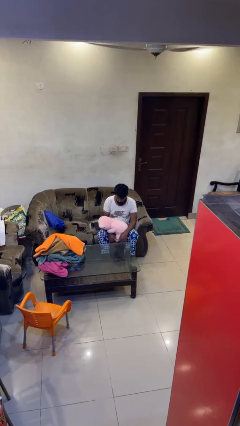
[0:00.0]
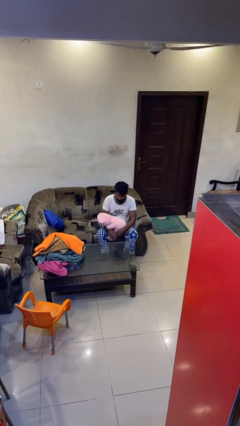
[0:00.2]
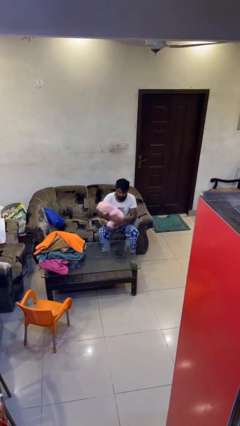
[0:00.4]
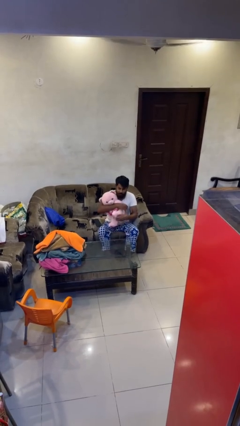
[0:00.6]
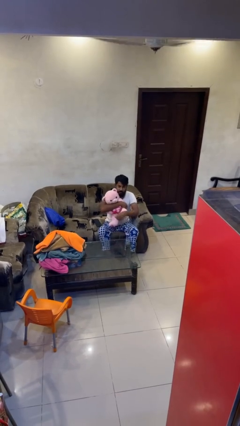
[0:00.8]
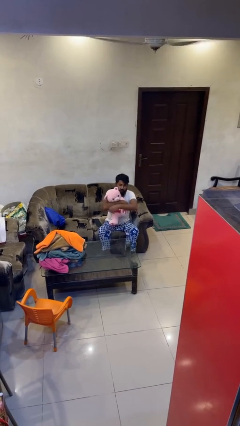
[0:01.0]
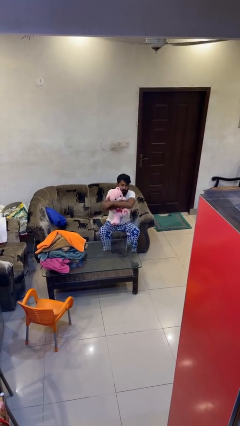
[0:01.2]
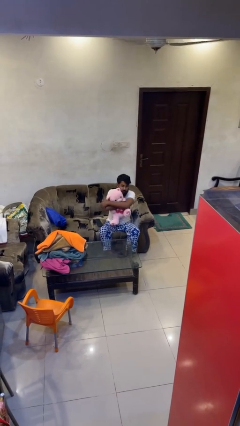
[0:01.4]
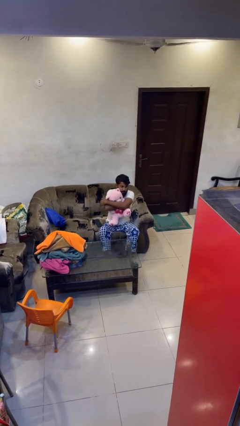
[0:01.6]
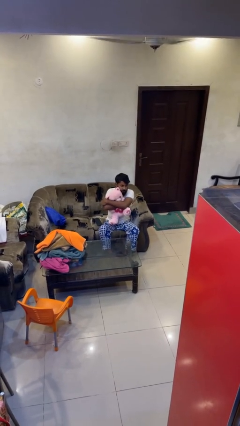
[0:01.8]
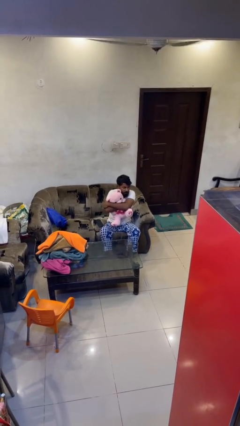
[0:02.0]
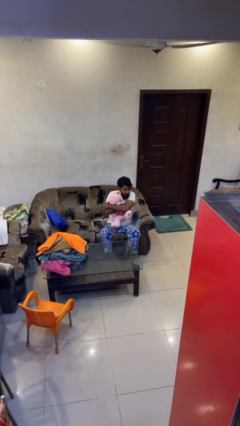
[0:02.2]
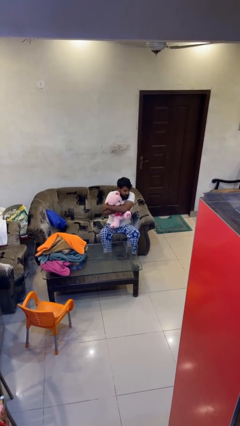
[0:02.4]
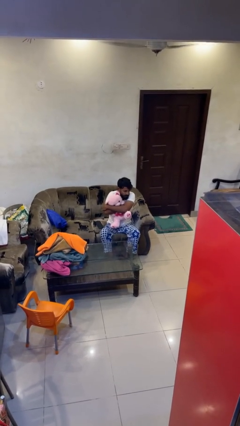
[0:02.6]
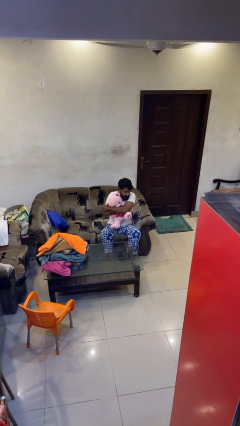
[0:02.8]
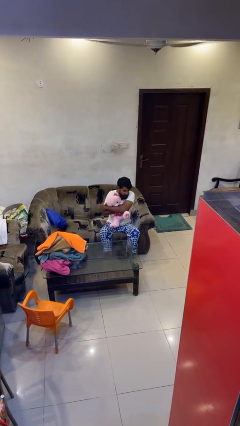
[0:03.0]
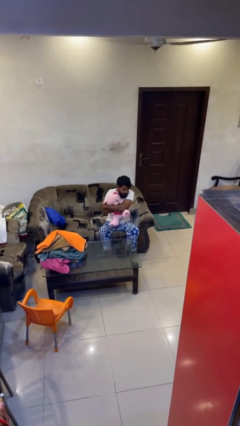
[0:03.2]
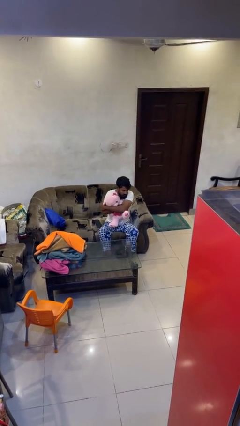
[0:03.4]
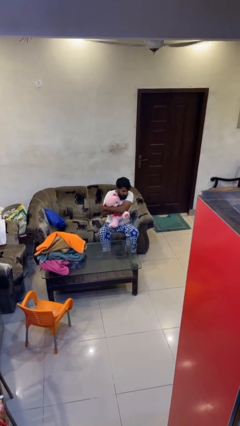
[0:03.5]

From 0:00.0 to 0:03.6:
person hugs stuffed animal

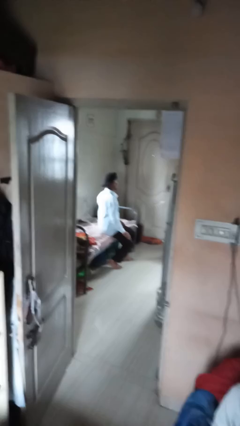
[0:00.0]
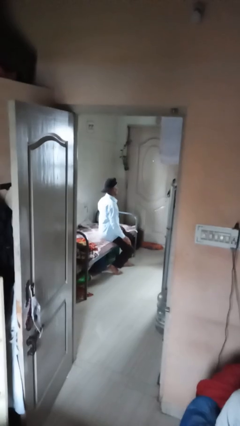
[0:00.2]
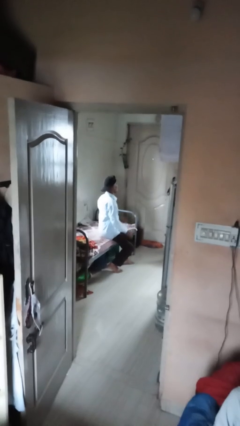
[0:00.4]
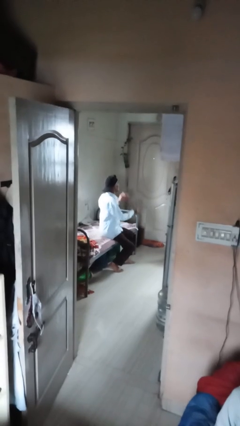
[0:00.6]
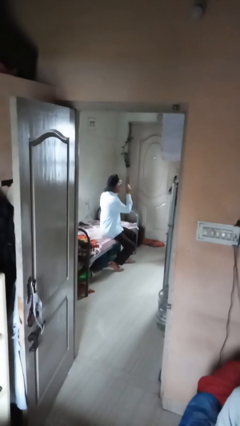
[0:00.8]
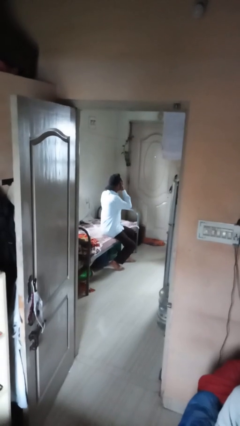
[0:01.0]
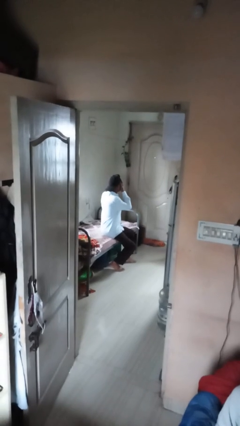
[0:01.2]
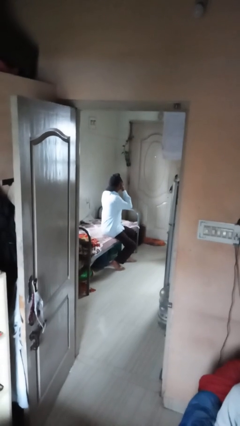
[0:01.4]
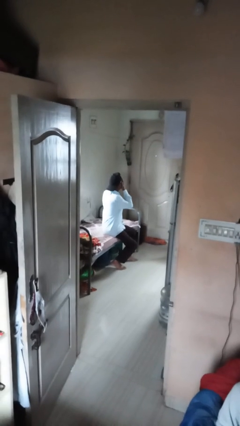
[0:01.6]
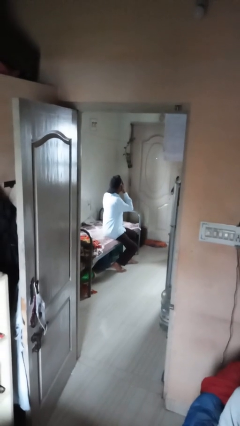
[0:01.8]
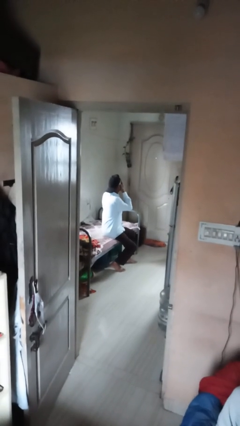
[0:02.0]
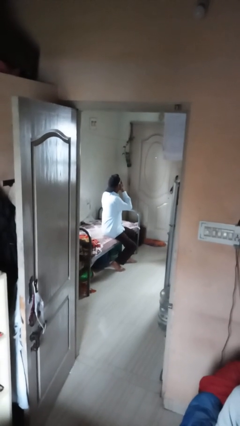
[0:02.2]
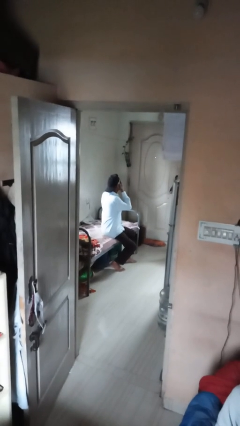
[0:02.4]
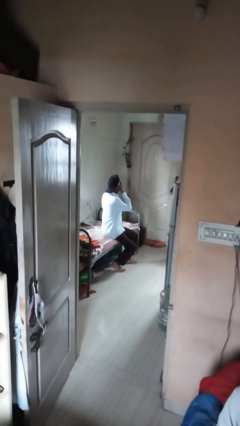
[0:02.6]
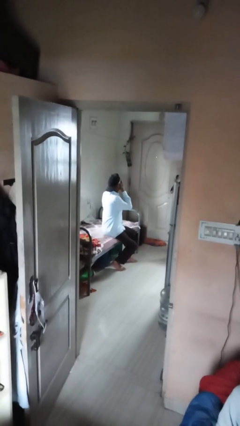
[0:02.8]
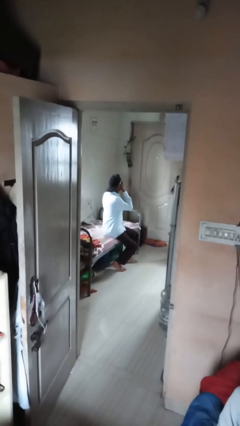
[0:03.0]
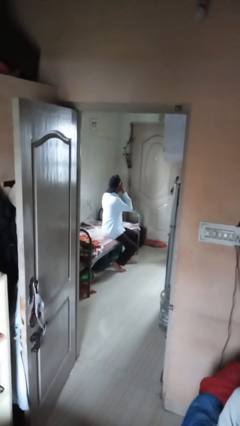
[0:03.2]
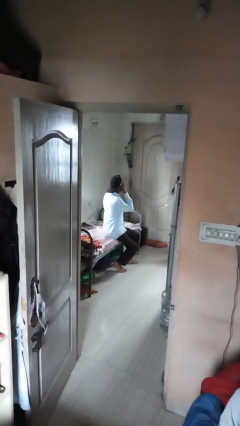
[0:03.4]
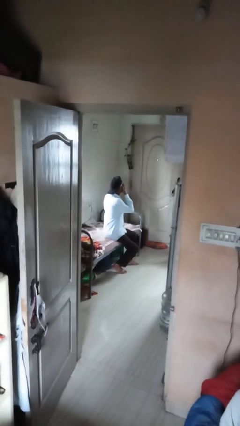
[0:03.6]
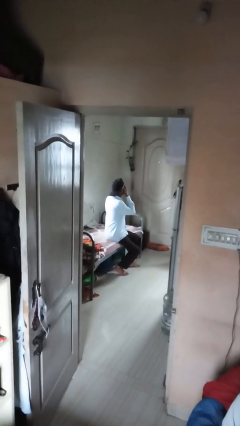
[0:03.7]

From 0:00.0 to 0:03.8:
person covers face with hands

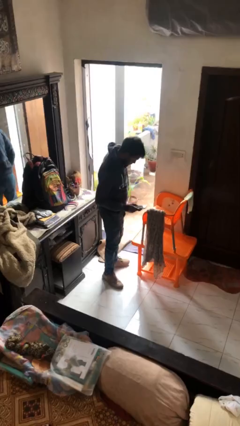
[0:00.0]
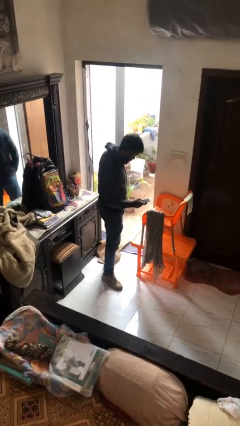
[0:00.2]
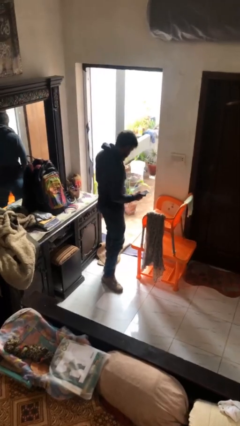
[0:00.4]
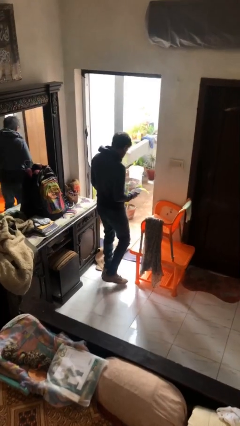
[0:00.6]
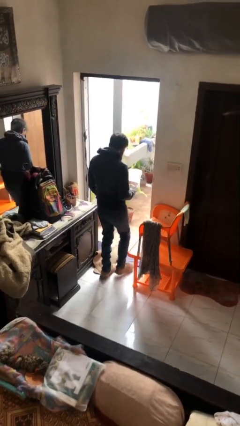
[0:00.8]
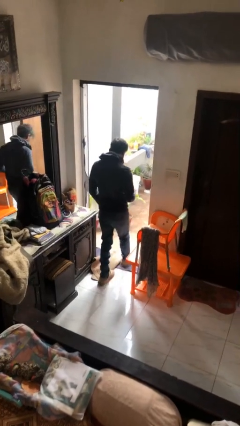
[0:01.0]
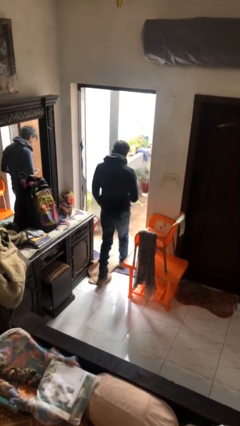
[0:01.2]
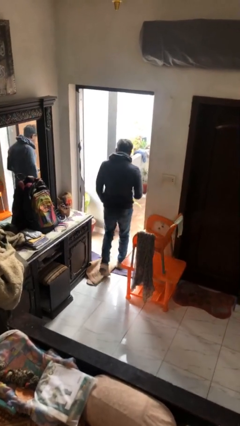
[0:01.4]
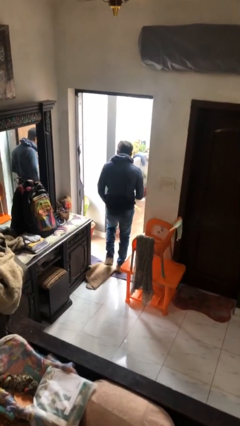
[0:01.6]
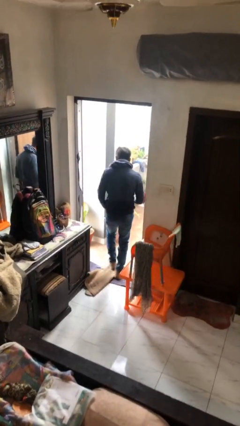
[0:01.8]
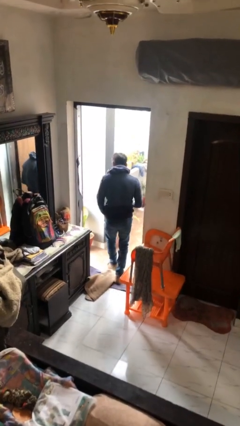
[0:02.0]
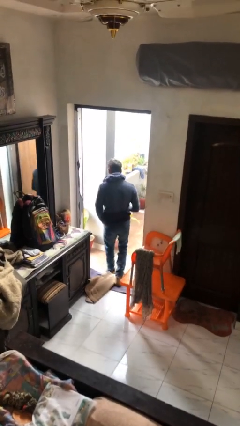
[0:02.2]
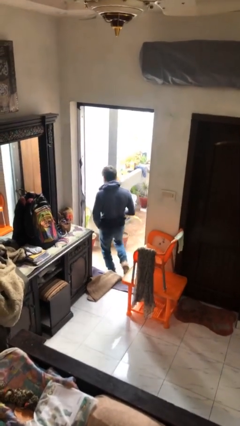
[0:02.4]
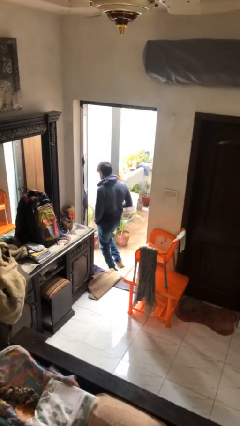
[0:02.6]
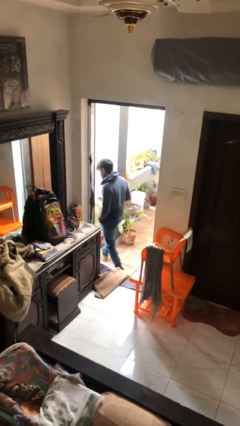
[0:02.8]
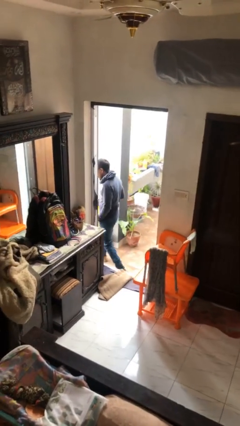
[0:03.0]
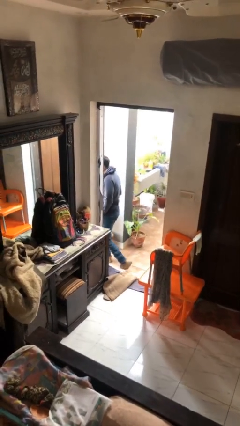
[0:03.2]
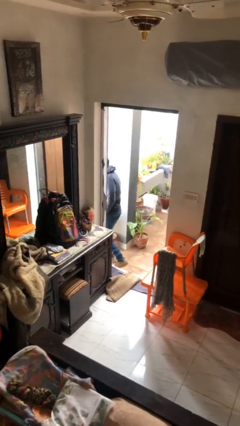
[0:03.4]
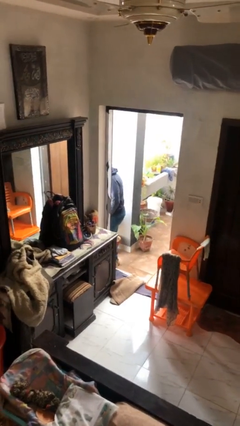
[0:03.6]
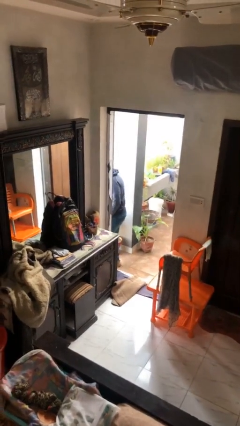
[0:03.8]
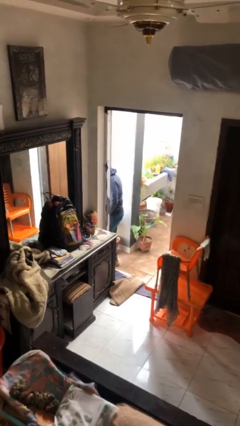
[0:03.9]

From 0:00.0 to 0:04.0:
person exits scene through structure

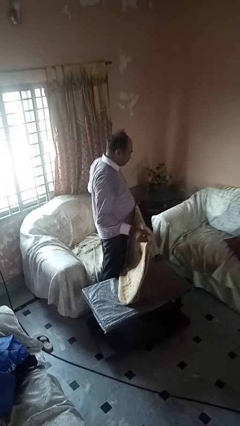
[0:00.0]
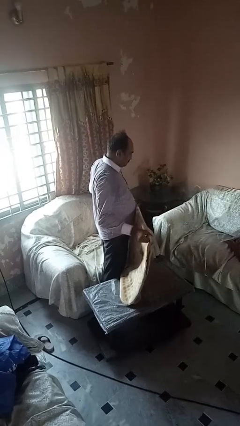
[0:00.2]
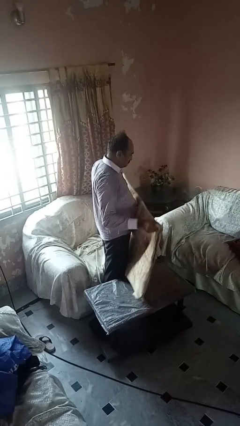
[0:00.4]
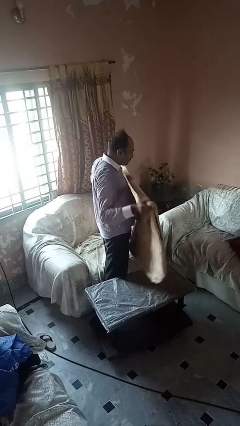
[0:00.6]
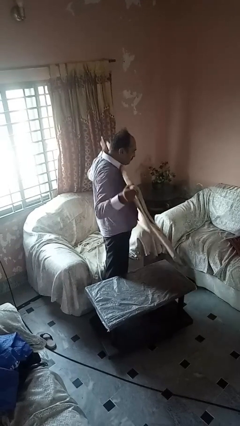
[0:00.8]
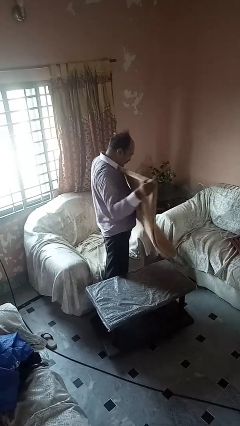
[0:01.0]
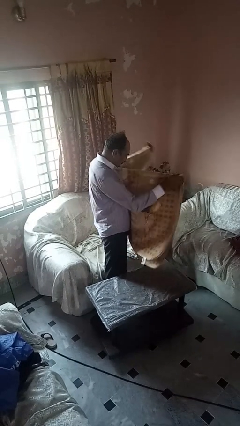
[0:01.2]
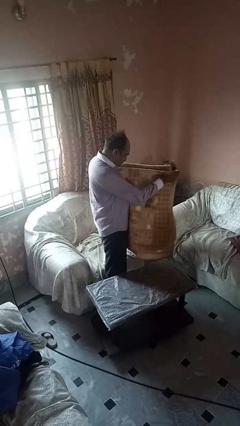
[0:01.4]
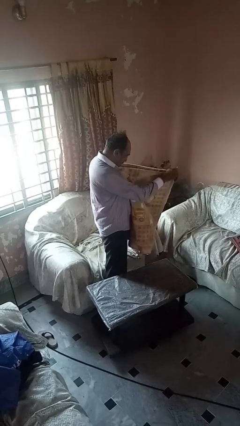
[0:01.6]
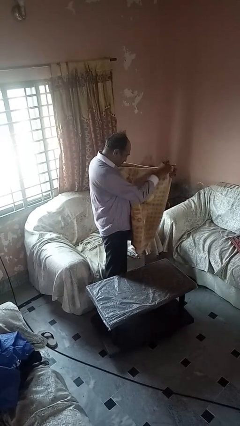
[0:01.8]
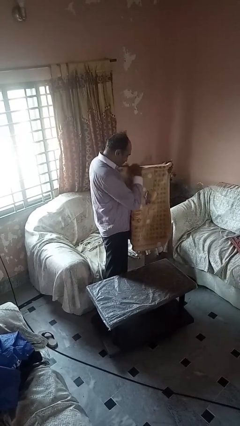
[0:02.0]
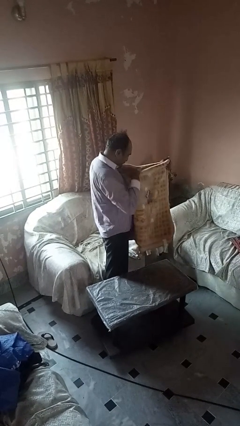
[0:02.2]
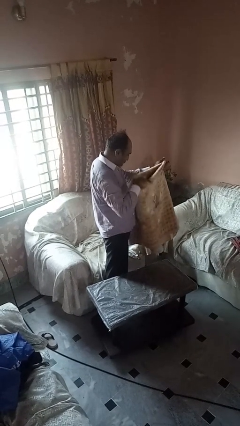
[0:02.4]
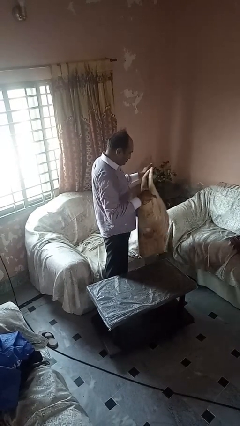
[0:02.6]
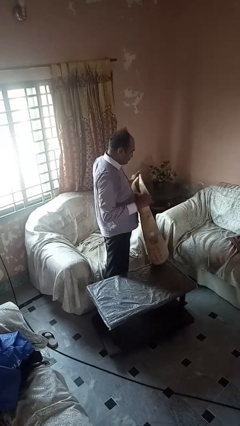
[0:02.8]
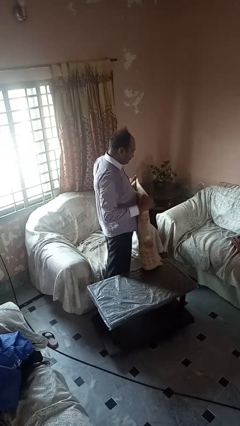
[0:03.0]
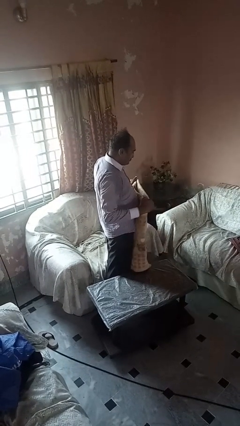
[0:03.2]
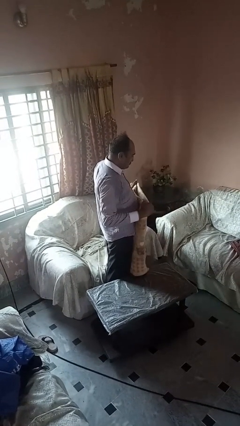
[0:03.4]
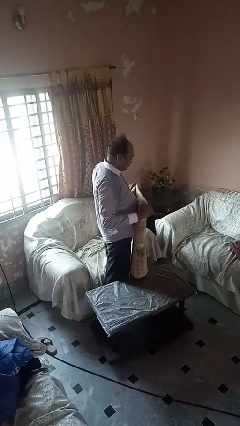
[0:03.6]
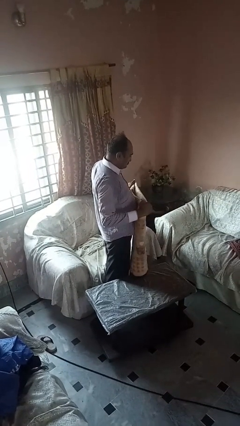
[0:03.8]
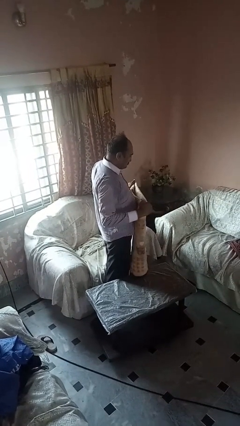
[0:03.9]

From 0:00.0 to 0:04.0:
person folds blanket

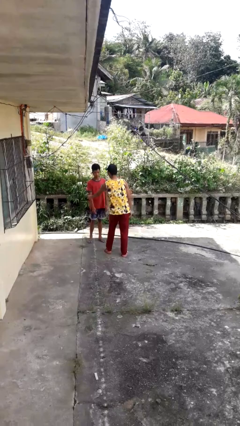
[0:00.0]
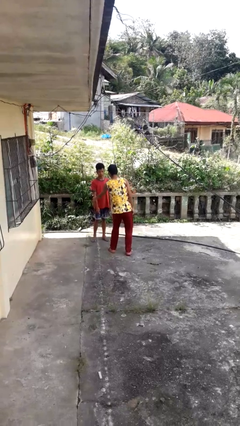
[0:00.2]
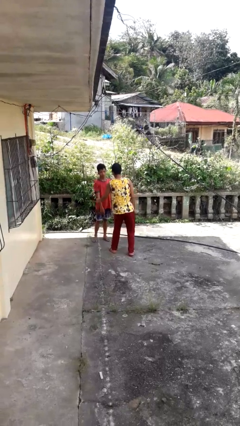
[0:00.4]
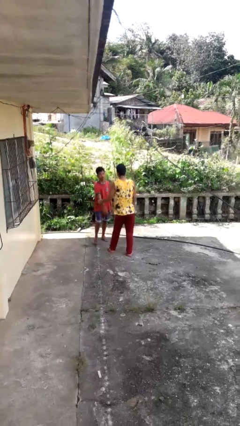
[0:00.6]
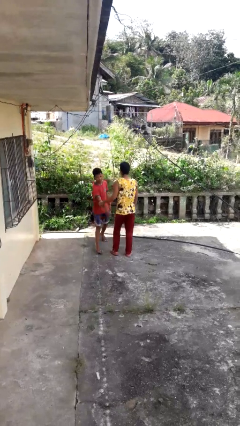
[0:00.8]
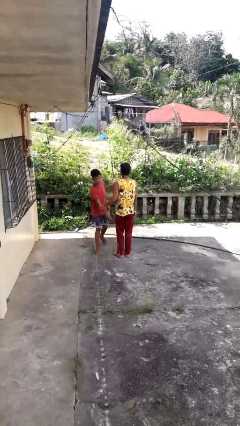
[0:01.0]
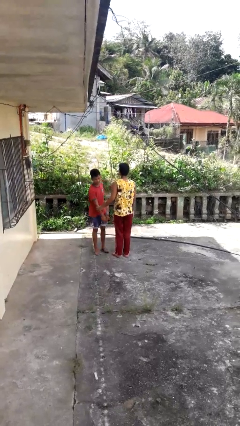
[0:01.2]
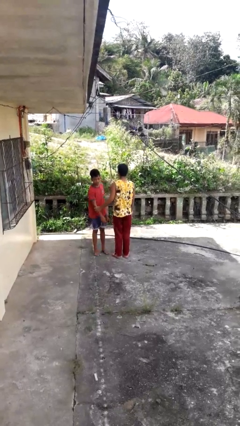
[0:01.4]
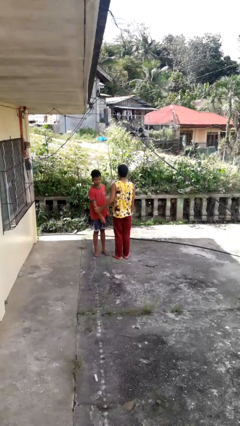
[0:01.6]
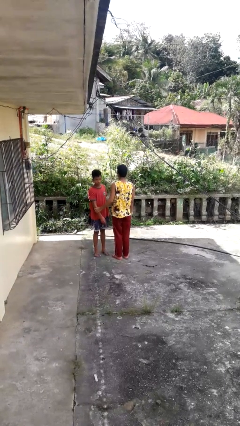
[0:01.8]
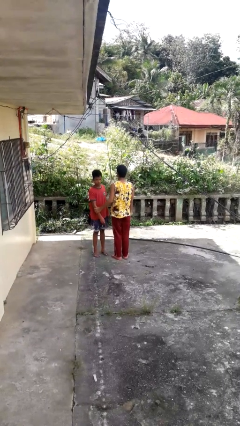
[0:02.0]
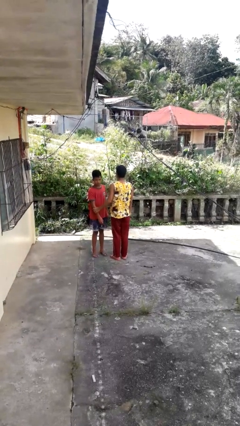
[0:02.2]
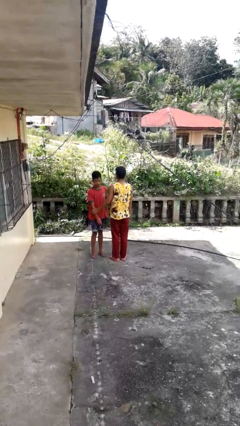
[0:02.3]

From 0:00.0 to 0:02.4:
person grabs person by forearm
